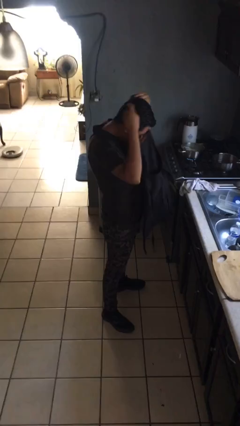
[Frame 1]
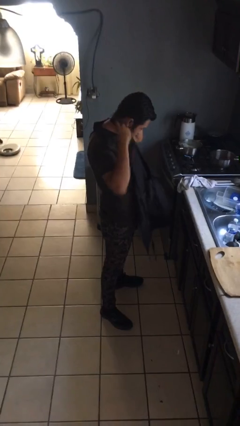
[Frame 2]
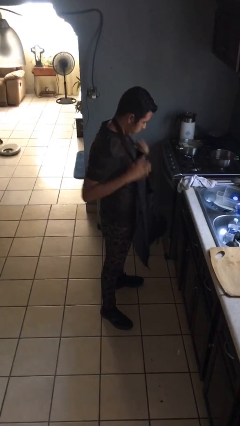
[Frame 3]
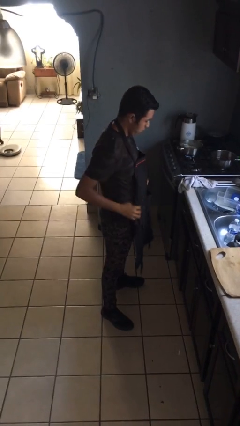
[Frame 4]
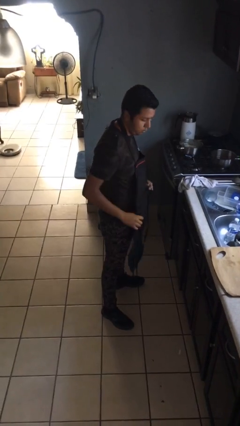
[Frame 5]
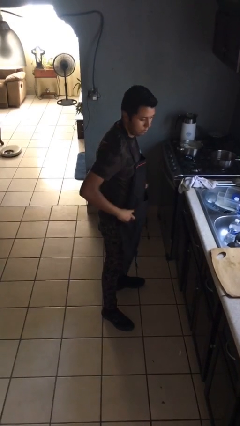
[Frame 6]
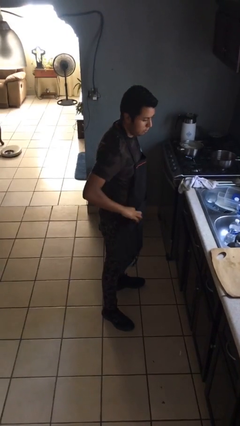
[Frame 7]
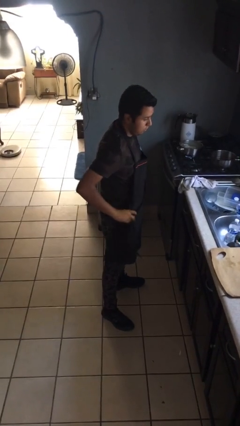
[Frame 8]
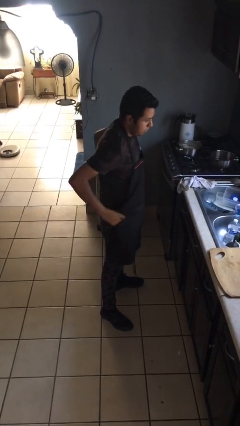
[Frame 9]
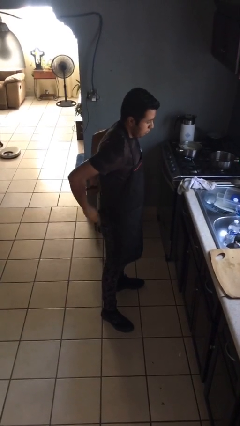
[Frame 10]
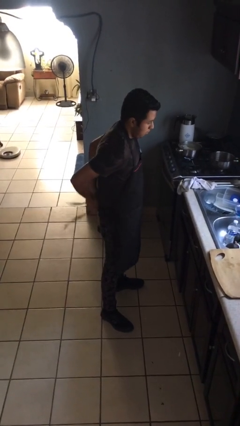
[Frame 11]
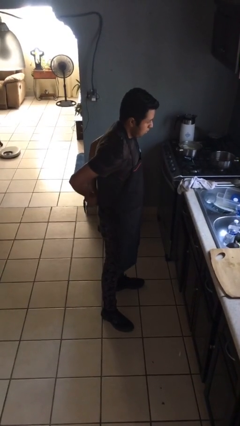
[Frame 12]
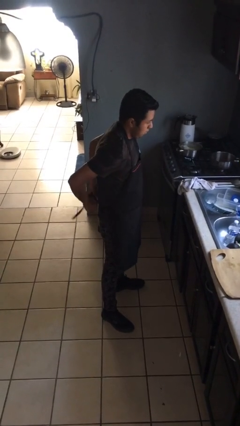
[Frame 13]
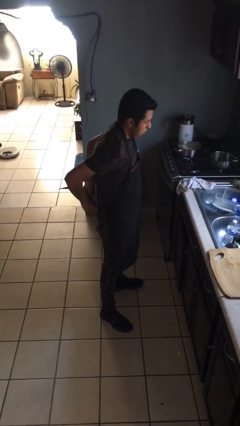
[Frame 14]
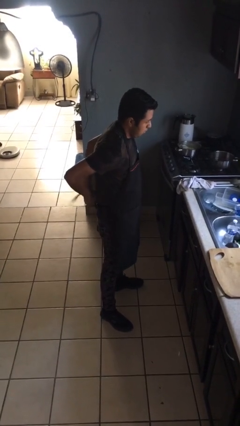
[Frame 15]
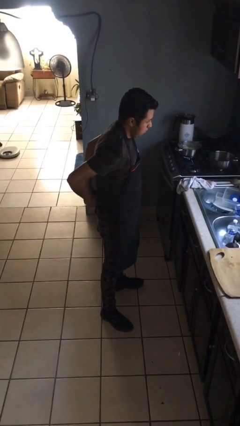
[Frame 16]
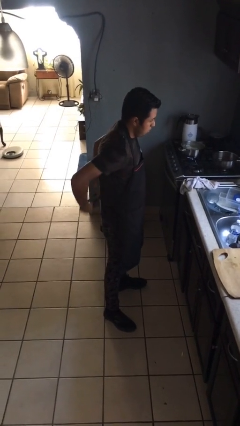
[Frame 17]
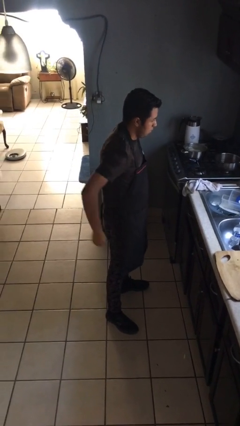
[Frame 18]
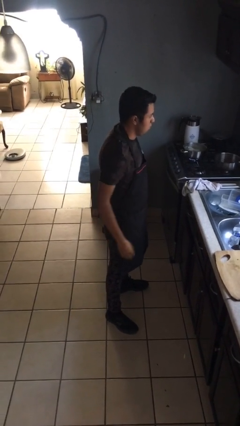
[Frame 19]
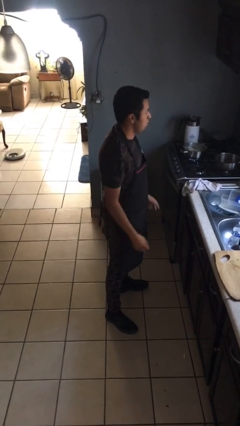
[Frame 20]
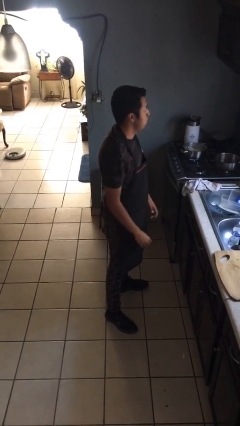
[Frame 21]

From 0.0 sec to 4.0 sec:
person puts on apron

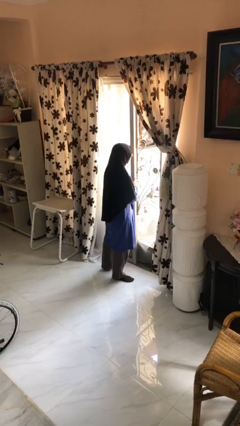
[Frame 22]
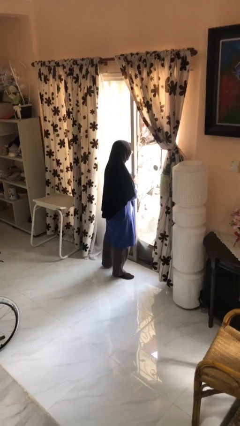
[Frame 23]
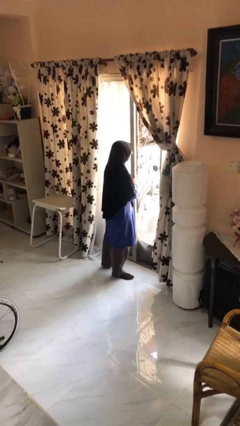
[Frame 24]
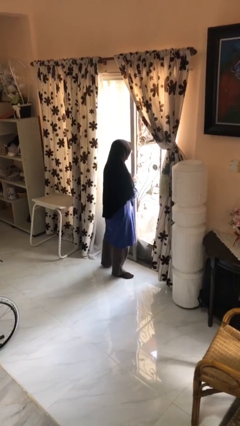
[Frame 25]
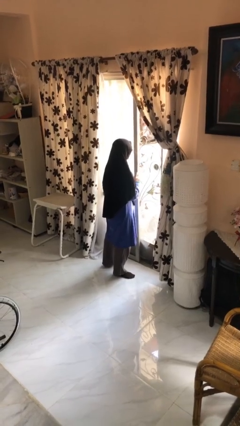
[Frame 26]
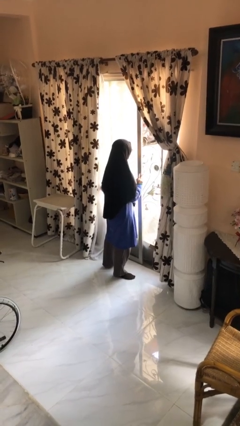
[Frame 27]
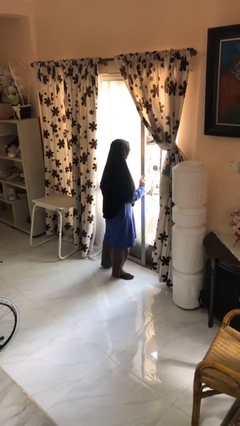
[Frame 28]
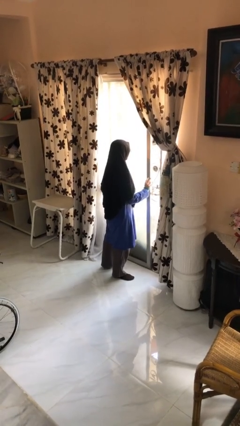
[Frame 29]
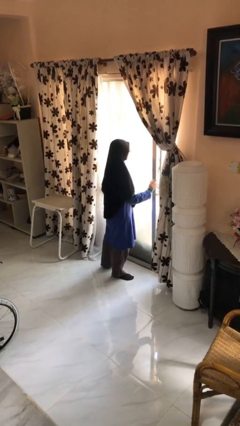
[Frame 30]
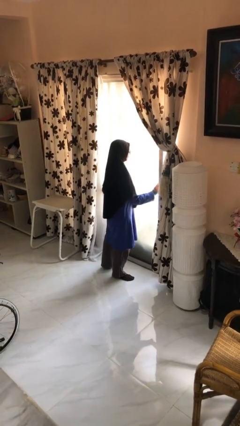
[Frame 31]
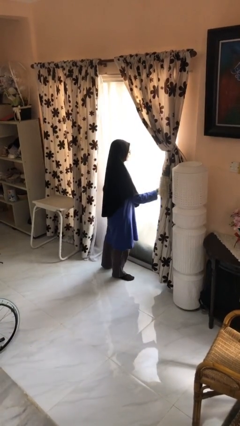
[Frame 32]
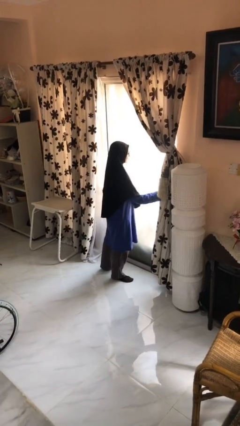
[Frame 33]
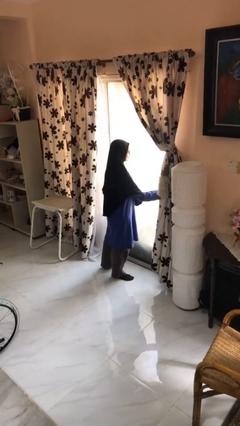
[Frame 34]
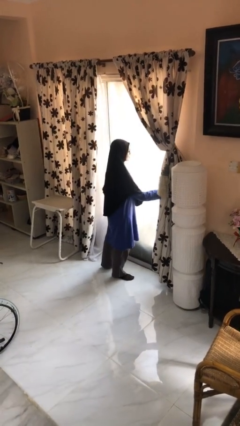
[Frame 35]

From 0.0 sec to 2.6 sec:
person closes sliding door

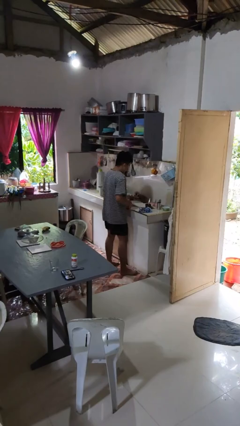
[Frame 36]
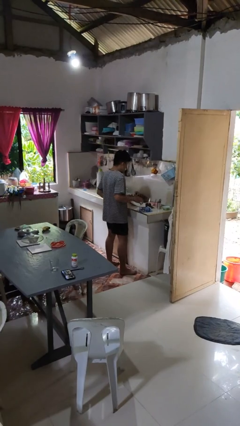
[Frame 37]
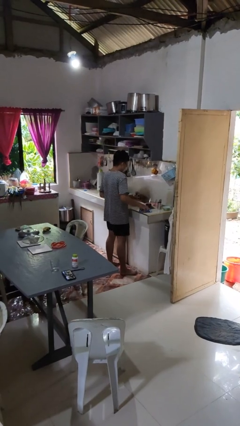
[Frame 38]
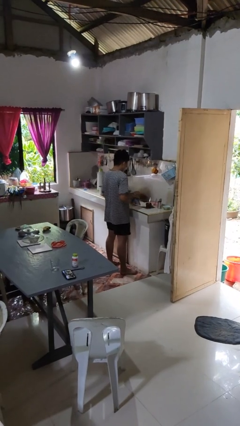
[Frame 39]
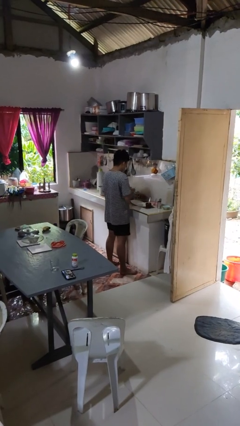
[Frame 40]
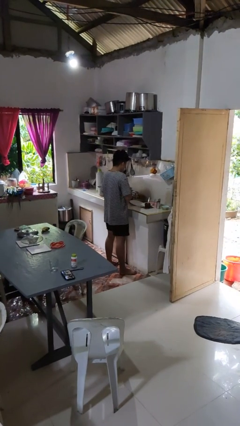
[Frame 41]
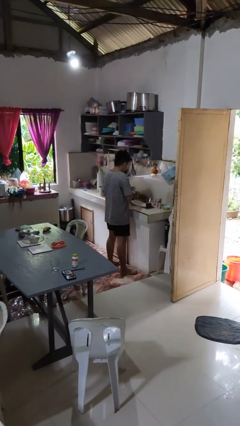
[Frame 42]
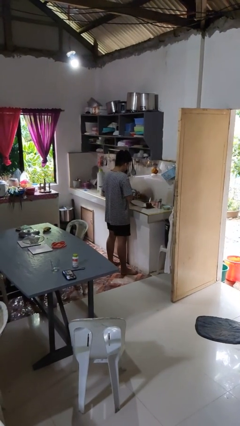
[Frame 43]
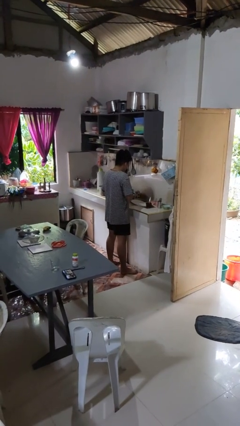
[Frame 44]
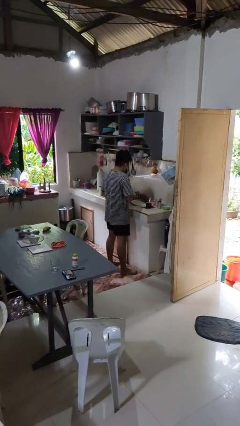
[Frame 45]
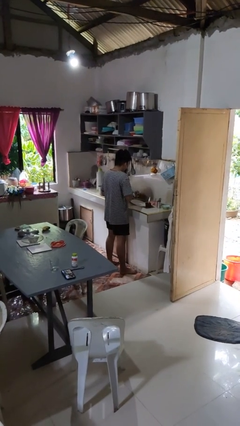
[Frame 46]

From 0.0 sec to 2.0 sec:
person dries hands with towel

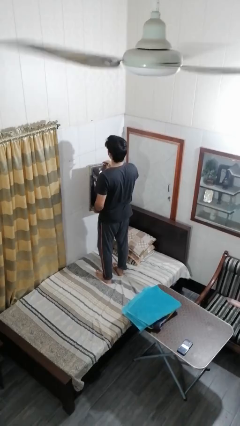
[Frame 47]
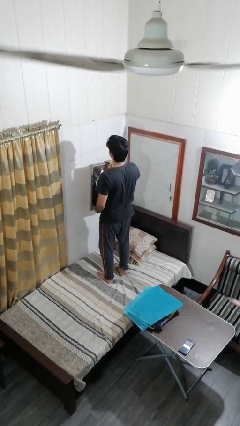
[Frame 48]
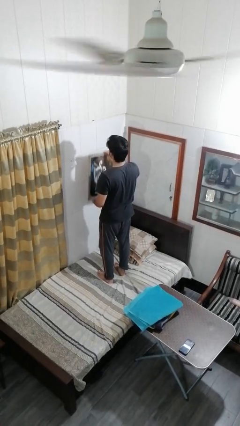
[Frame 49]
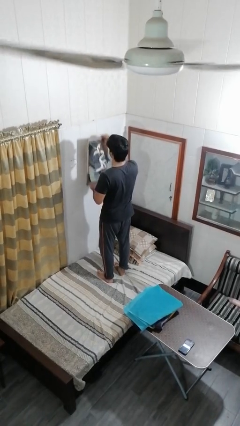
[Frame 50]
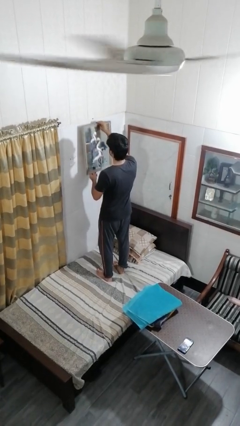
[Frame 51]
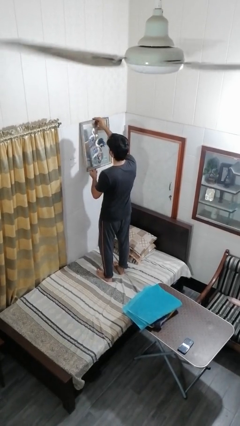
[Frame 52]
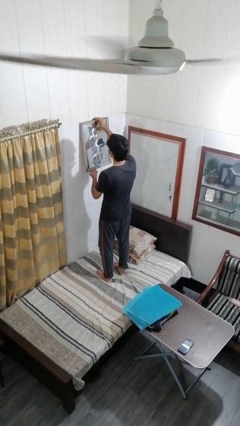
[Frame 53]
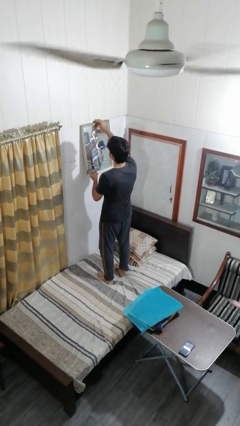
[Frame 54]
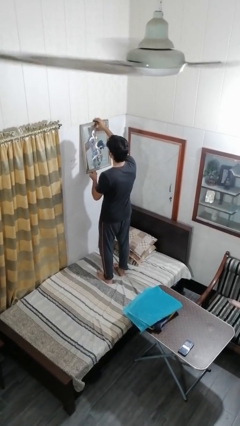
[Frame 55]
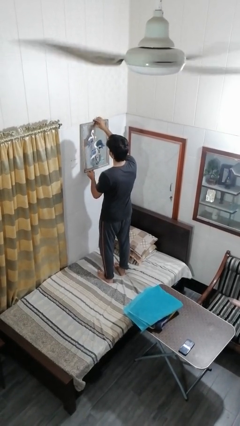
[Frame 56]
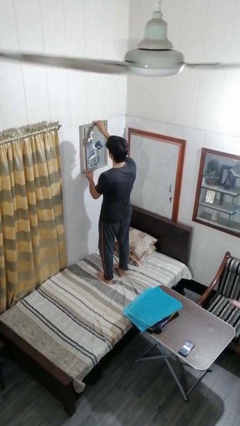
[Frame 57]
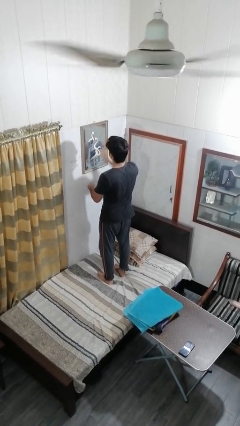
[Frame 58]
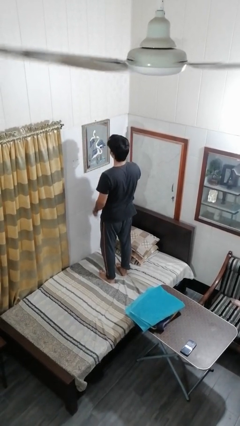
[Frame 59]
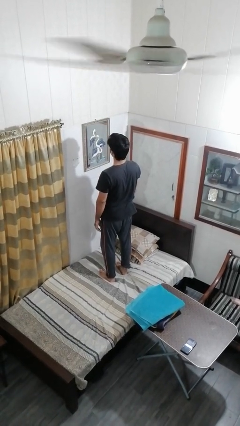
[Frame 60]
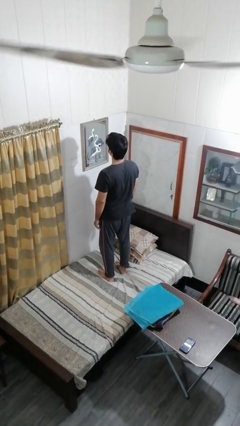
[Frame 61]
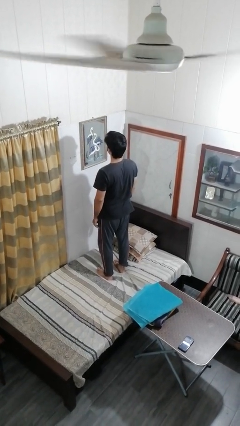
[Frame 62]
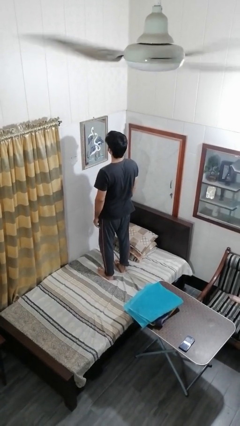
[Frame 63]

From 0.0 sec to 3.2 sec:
person puts up picture frame

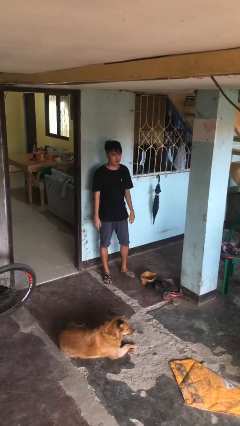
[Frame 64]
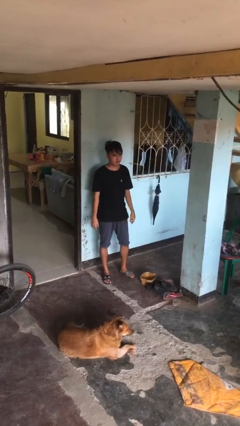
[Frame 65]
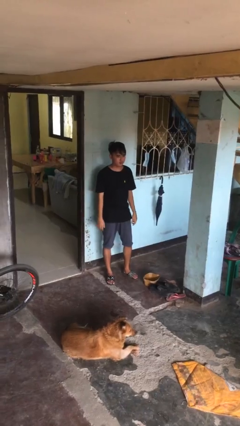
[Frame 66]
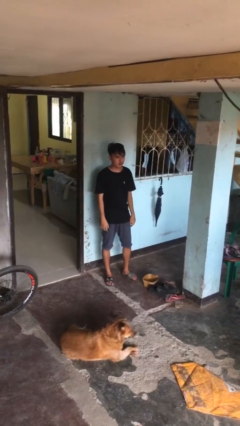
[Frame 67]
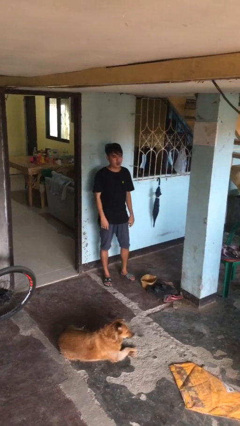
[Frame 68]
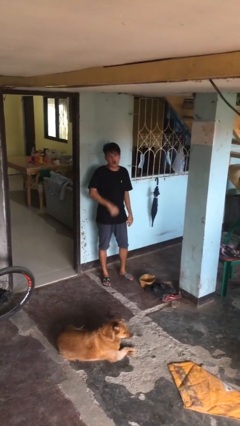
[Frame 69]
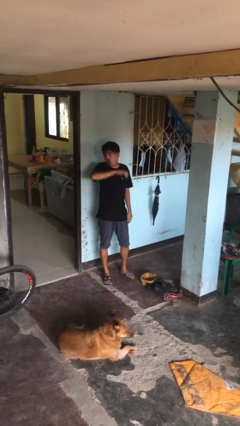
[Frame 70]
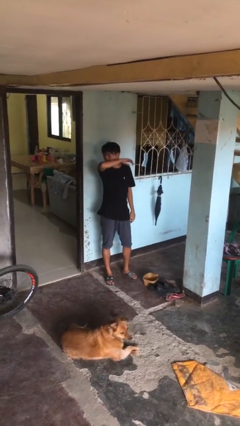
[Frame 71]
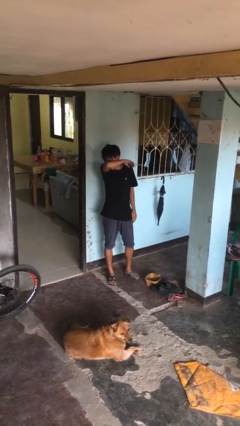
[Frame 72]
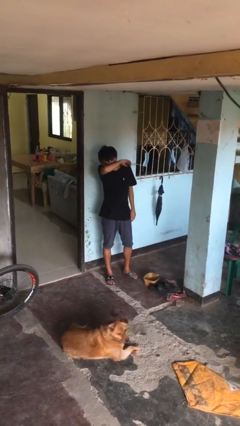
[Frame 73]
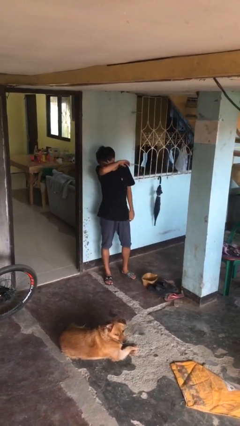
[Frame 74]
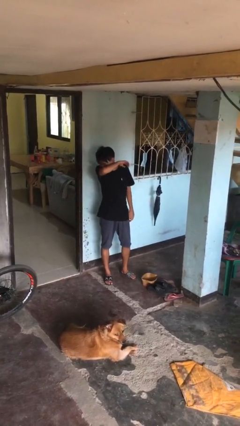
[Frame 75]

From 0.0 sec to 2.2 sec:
person sneezes into arm

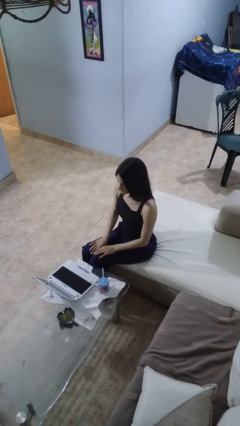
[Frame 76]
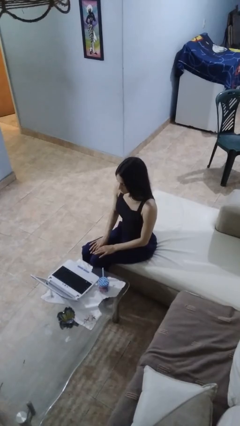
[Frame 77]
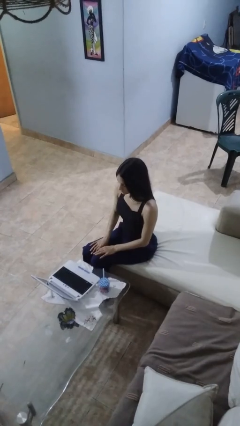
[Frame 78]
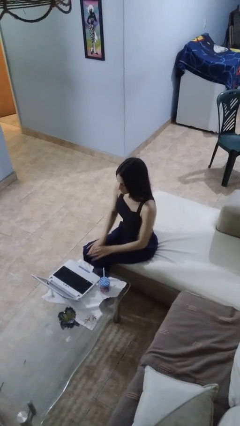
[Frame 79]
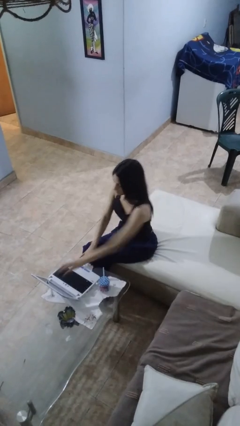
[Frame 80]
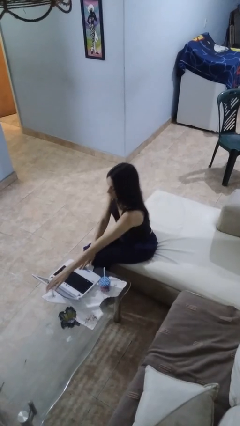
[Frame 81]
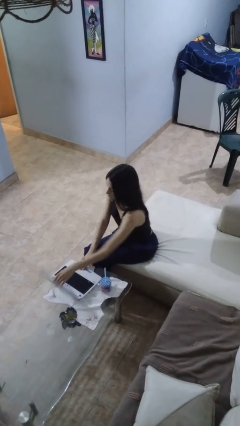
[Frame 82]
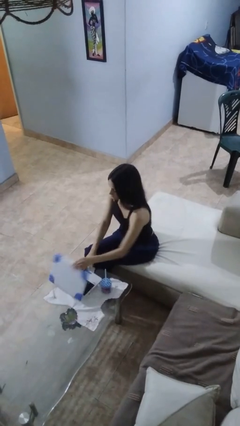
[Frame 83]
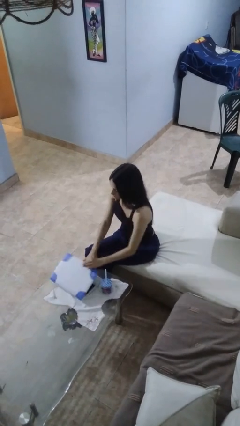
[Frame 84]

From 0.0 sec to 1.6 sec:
person closes laptop

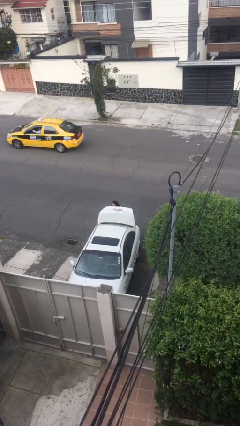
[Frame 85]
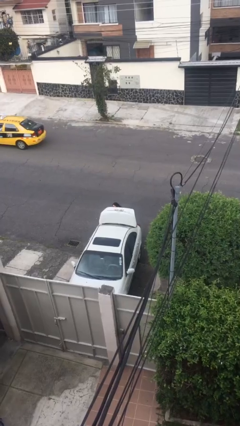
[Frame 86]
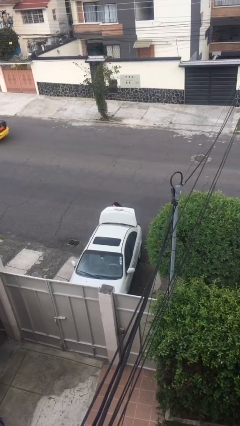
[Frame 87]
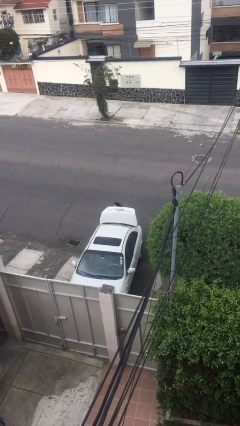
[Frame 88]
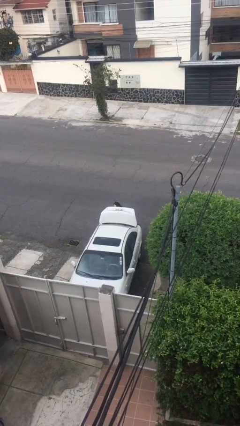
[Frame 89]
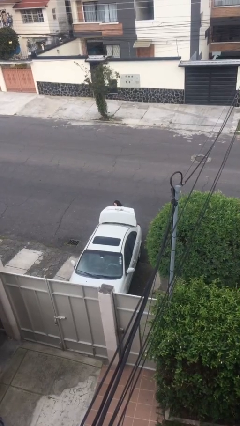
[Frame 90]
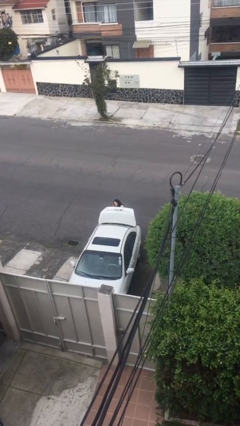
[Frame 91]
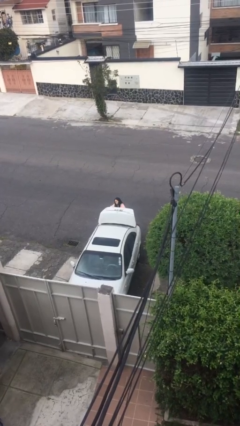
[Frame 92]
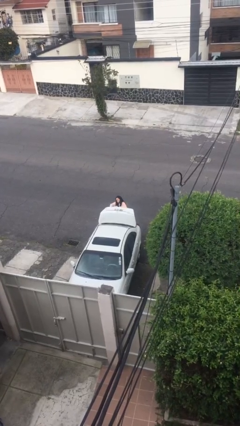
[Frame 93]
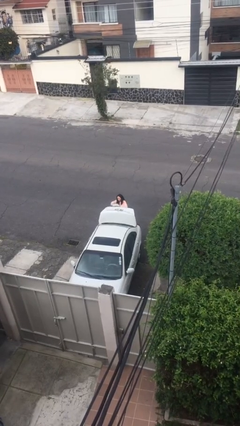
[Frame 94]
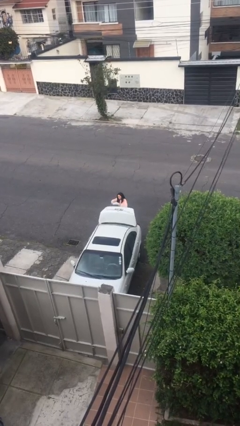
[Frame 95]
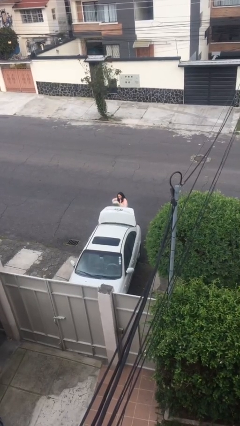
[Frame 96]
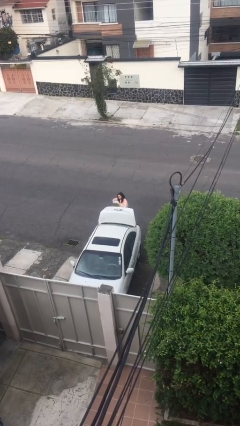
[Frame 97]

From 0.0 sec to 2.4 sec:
person unloads car
